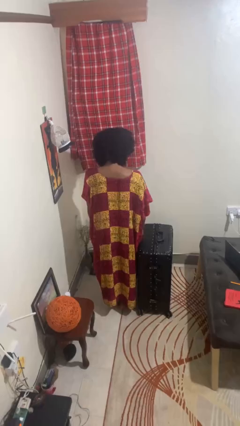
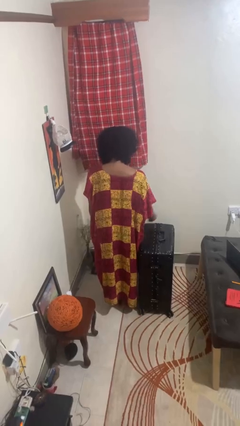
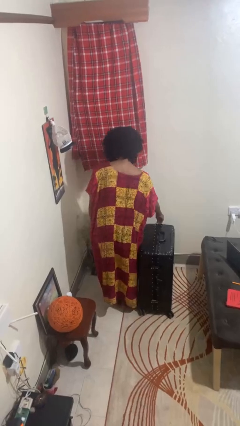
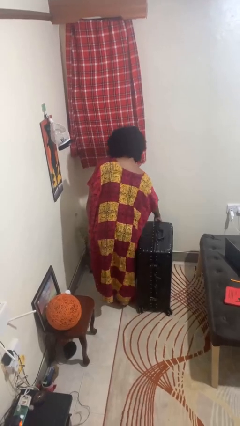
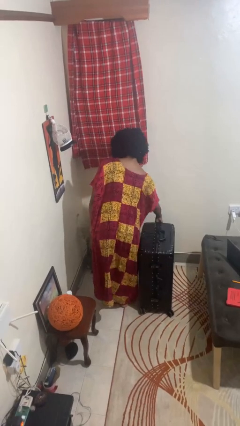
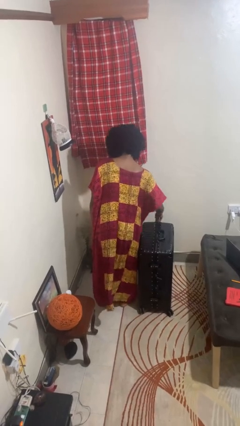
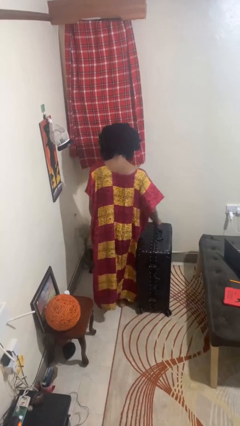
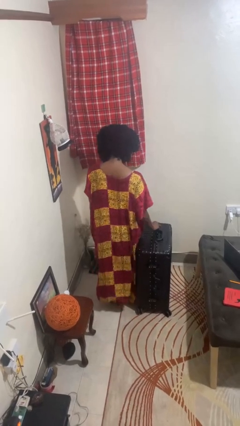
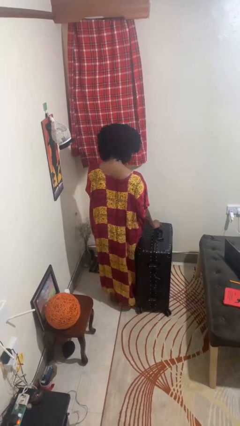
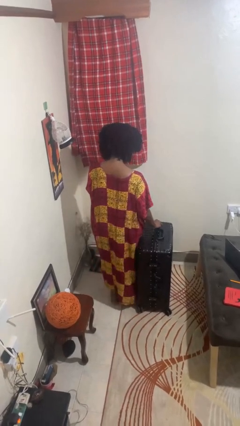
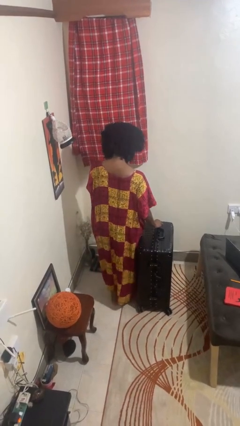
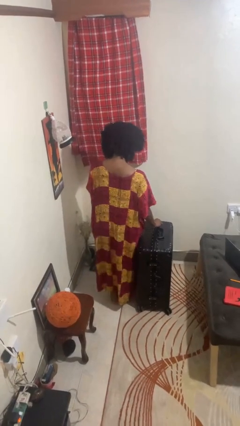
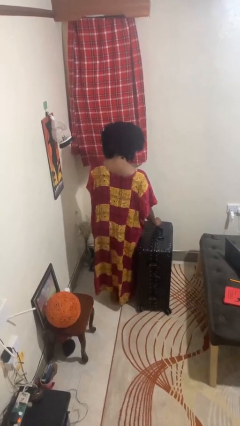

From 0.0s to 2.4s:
person opens suitcase

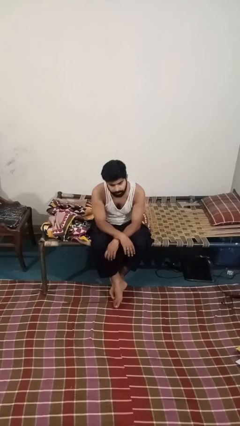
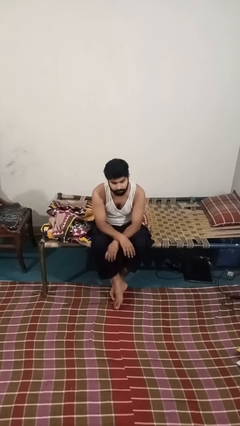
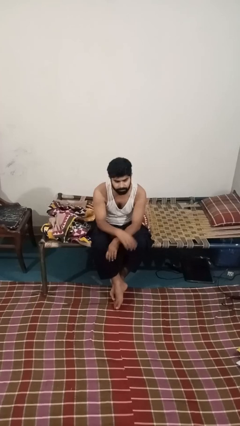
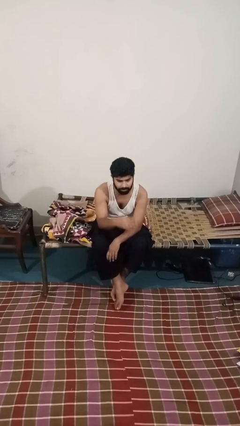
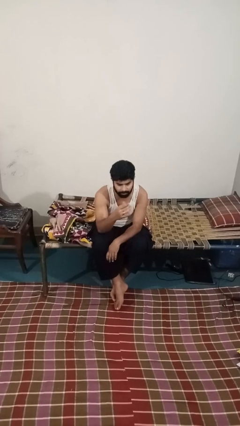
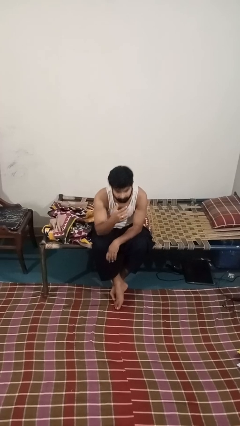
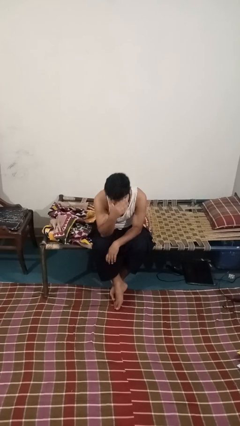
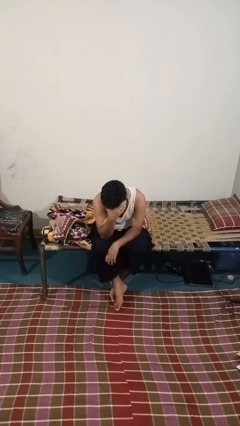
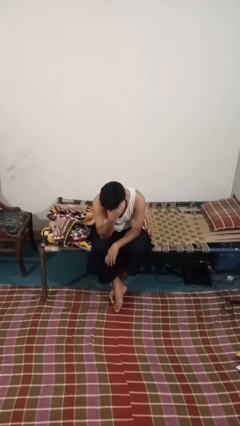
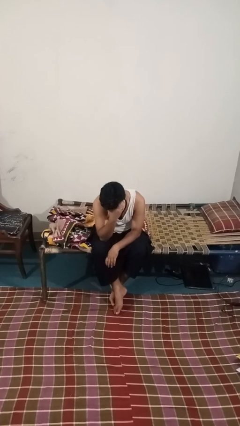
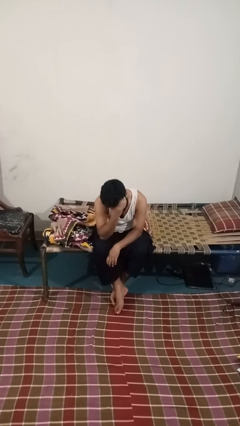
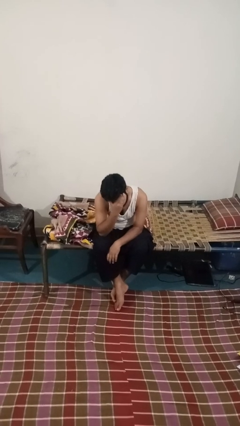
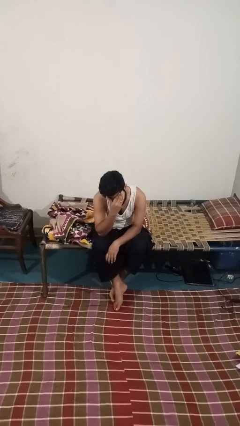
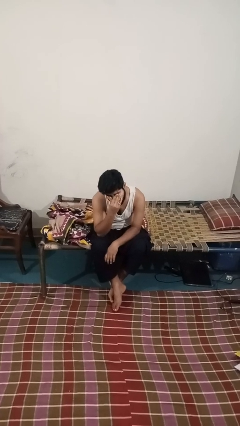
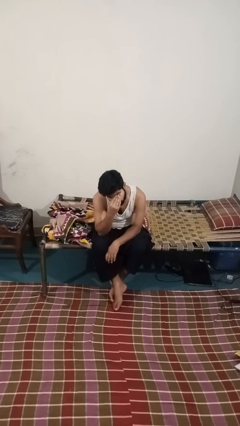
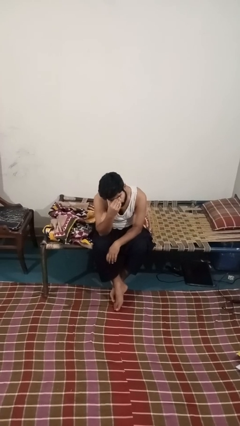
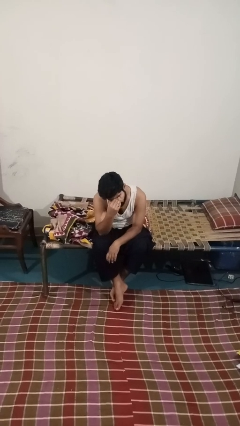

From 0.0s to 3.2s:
person covers face with hands

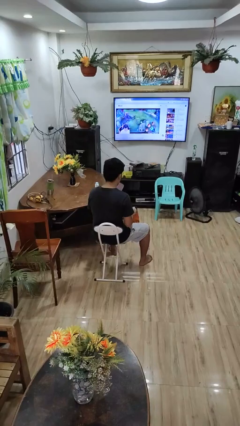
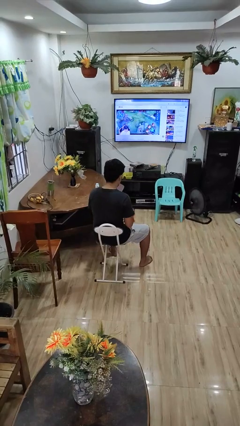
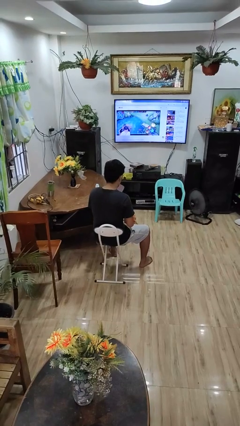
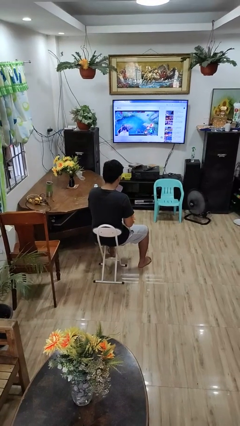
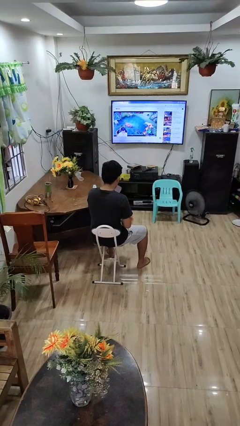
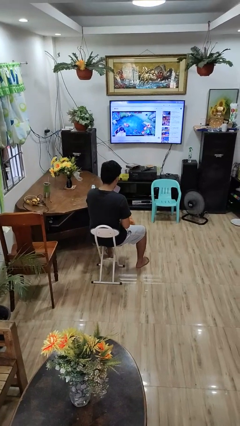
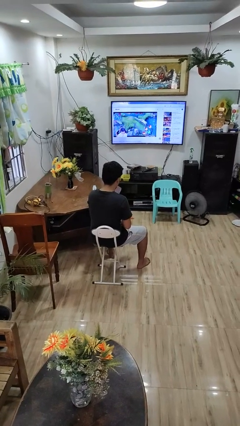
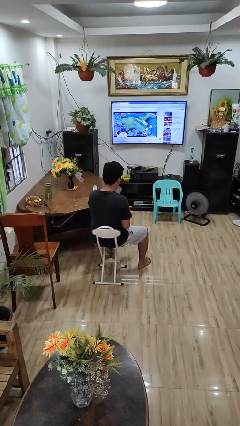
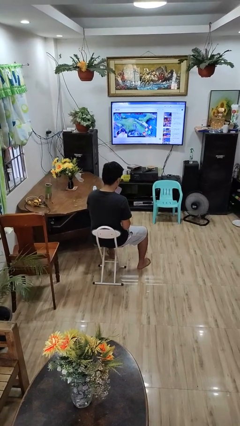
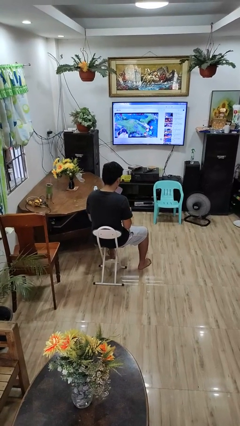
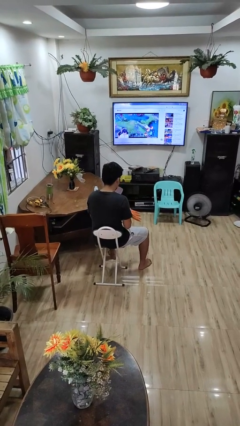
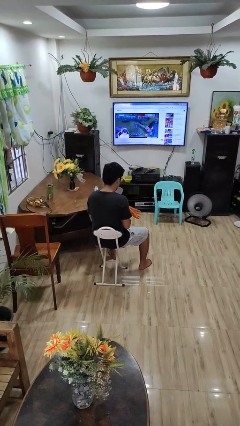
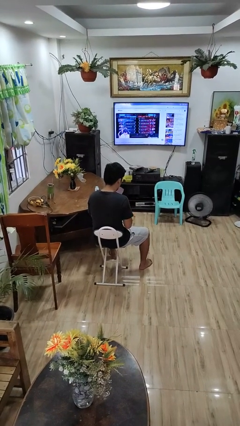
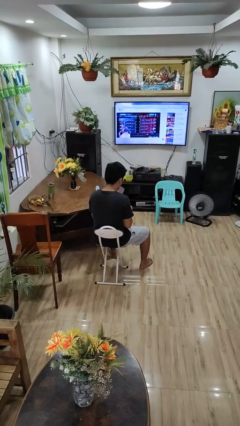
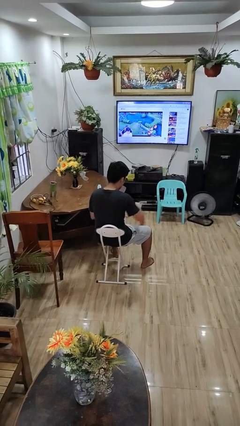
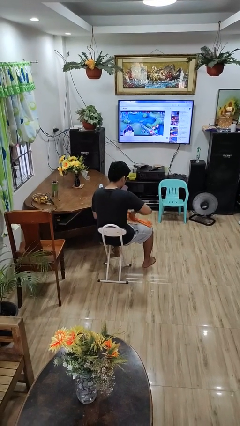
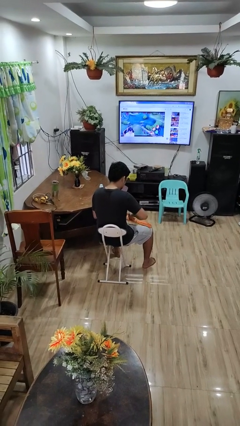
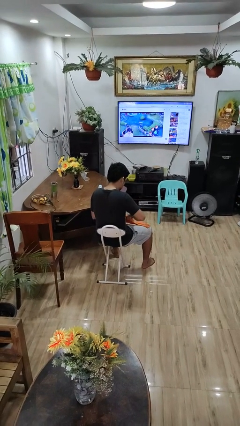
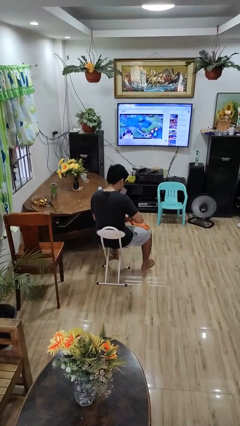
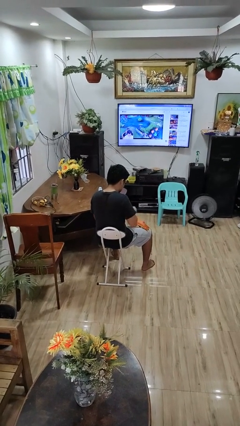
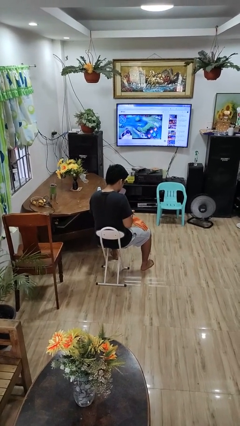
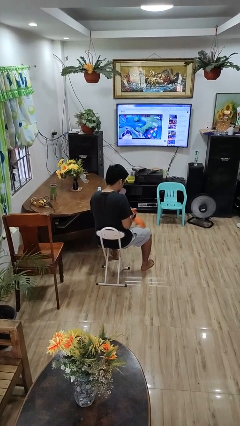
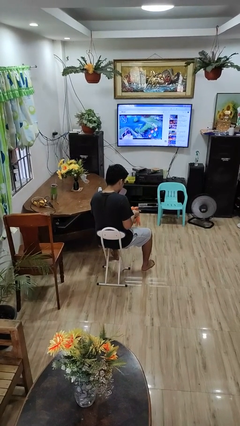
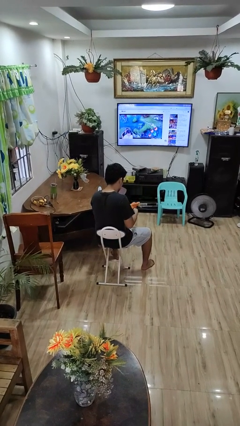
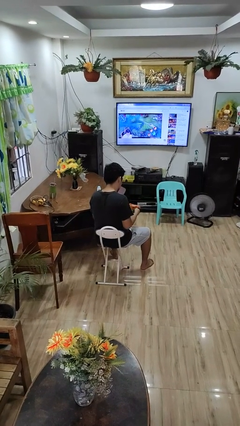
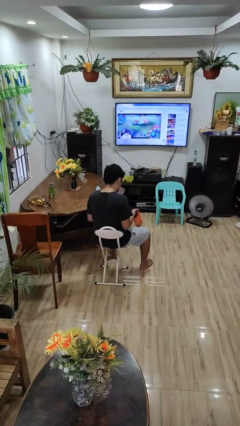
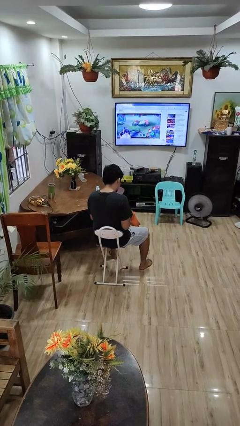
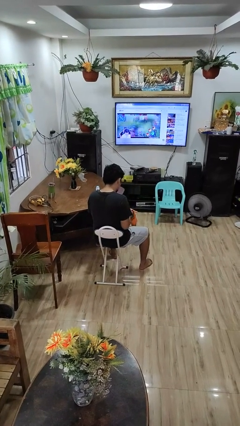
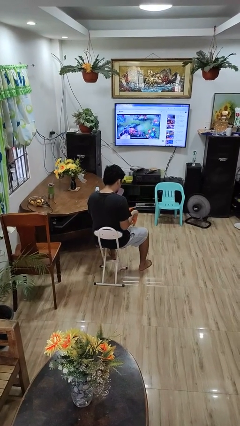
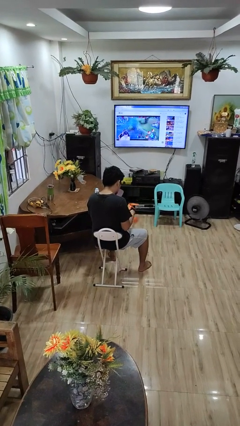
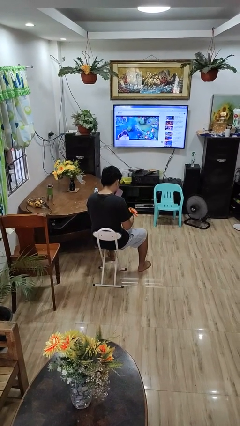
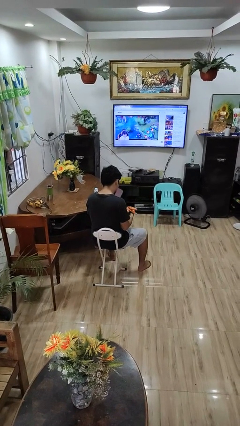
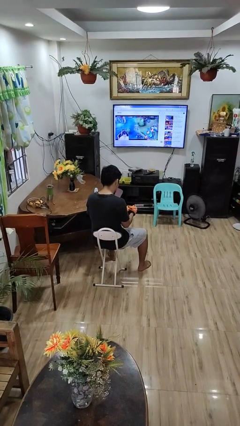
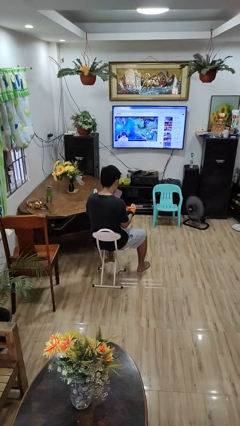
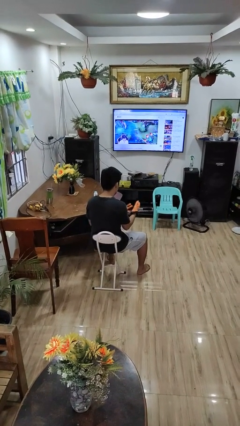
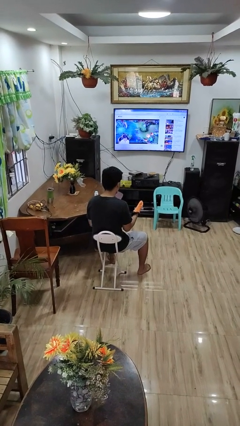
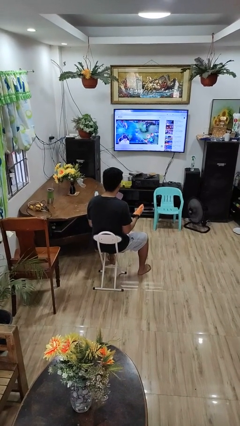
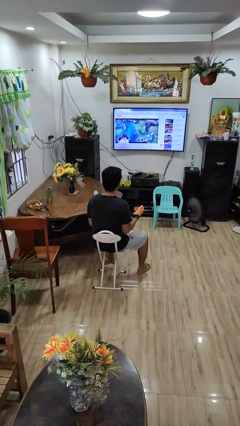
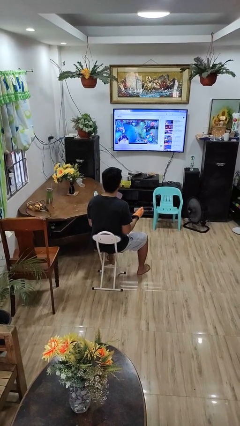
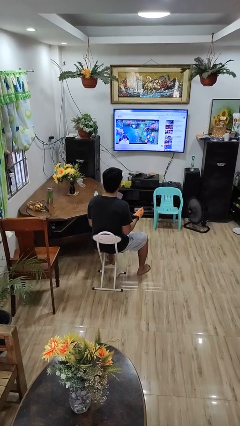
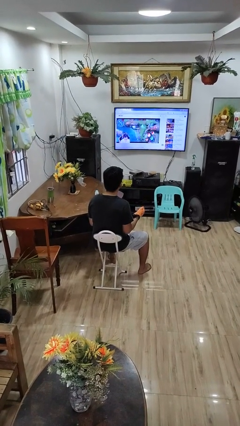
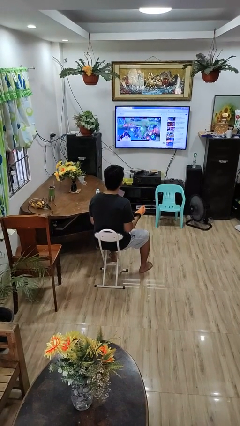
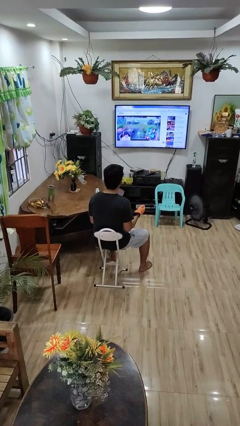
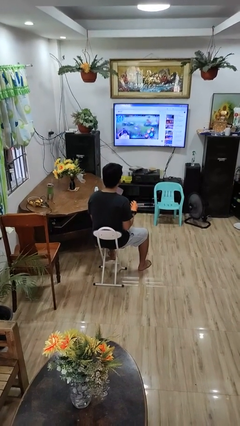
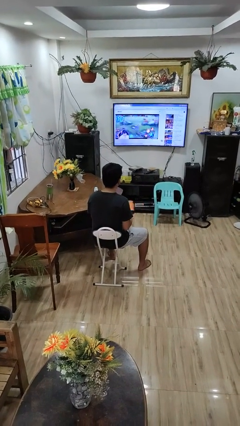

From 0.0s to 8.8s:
person puts on gloves

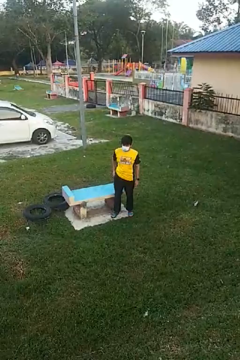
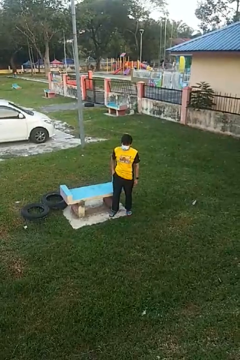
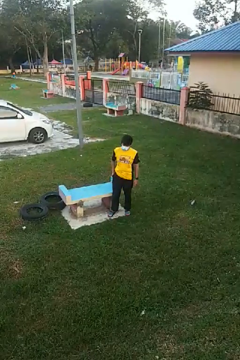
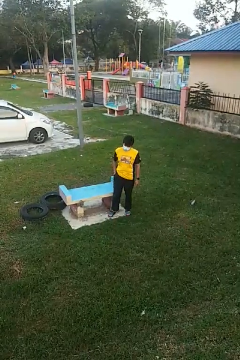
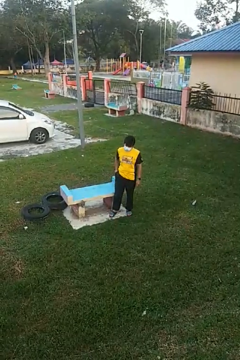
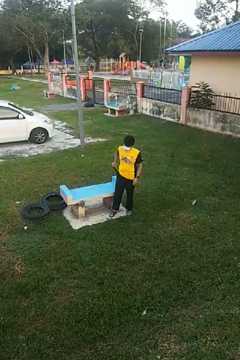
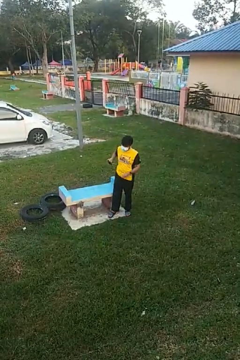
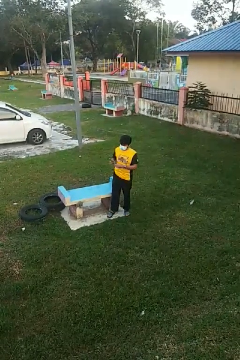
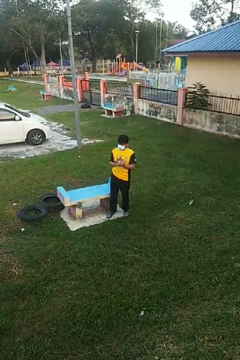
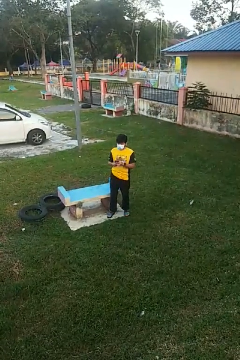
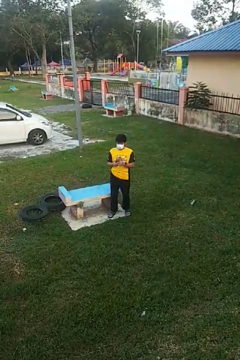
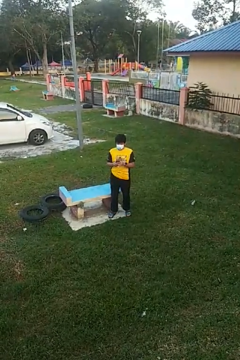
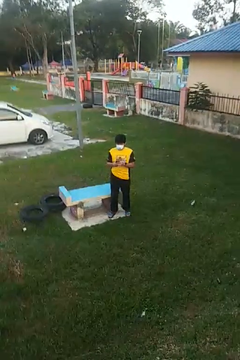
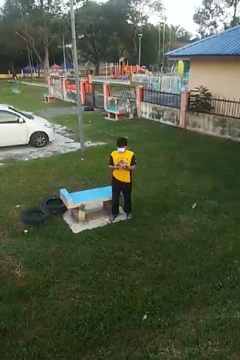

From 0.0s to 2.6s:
person takes phone from pocket

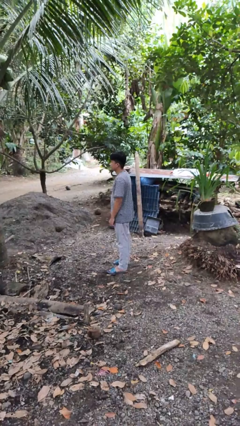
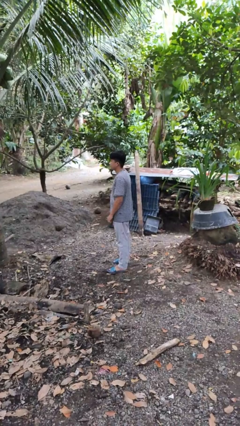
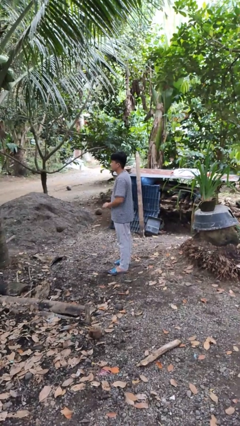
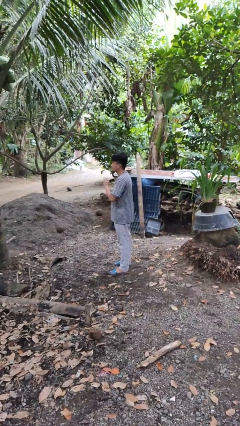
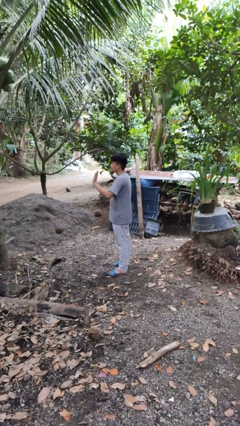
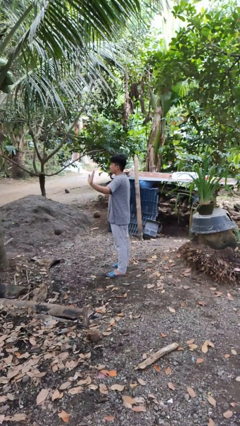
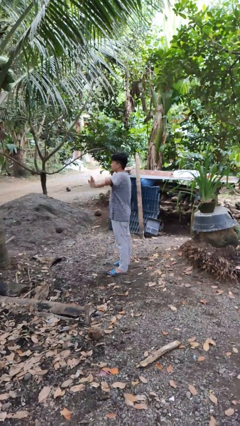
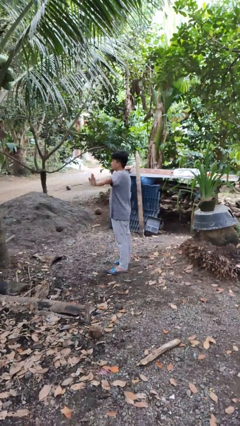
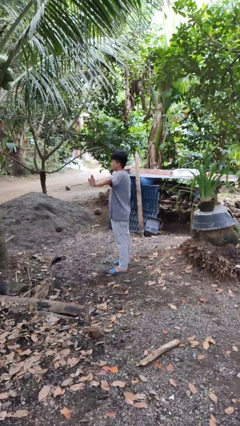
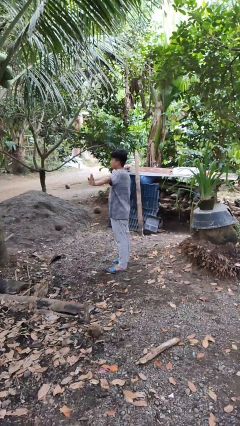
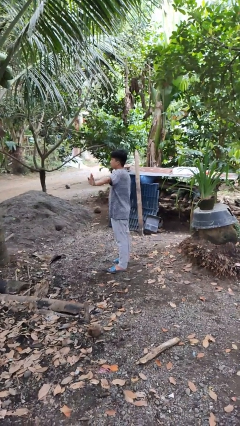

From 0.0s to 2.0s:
person gestures swipe left
